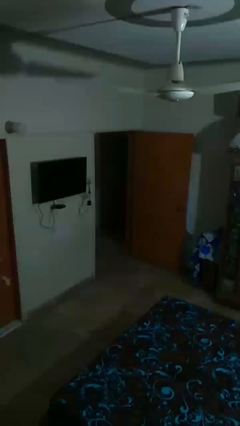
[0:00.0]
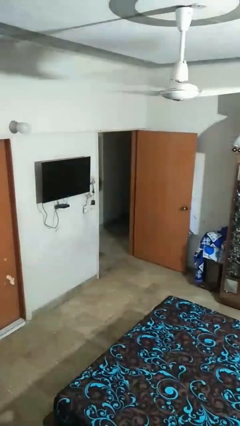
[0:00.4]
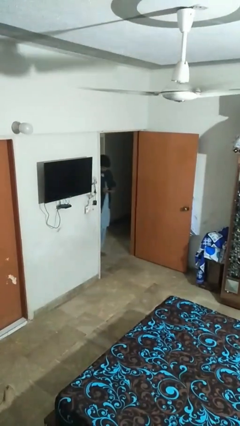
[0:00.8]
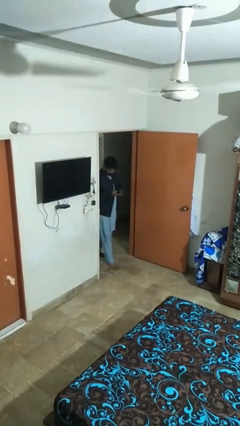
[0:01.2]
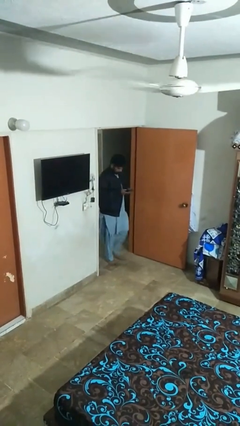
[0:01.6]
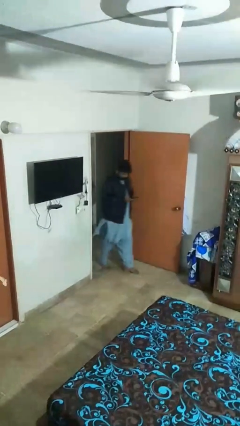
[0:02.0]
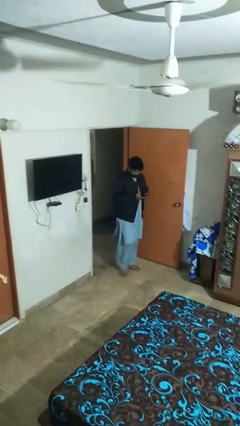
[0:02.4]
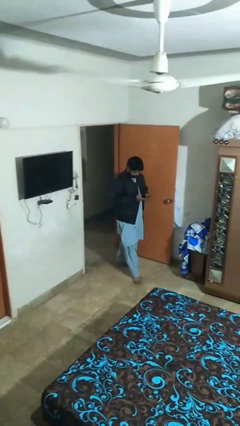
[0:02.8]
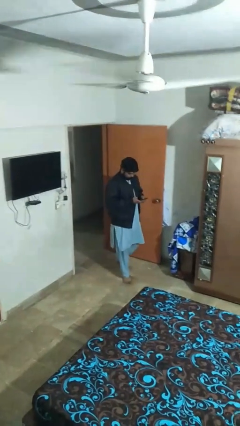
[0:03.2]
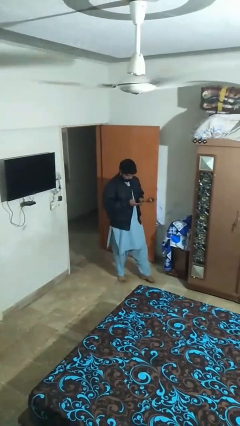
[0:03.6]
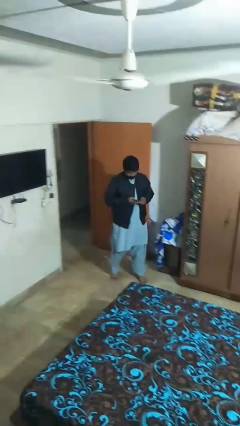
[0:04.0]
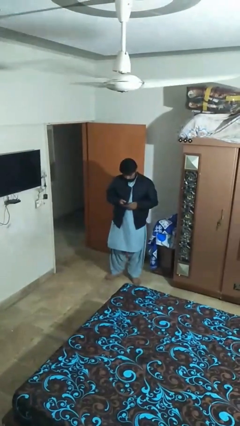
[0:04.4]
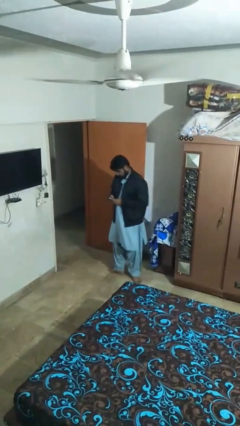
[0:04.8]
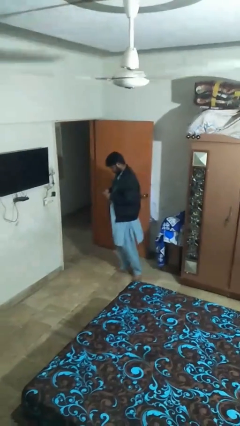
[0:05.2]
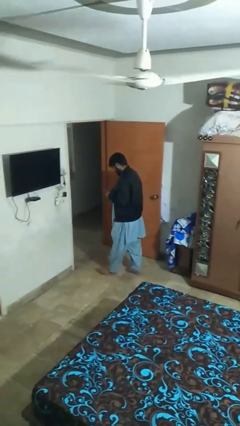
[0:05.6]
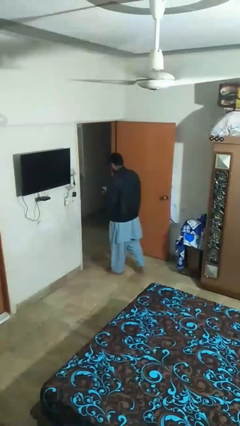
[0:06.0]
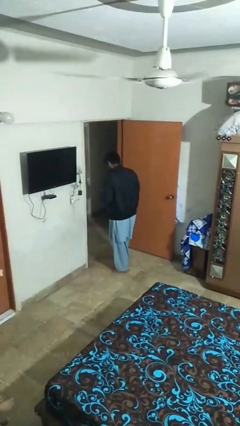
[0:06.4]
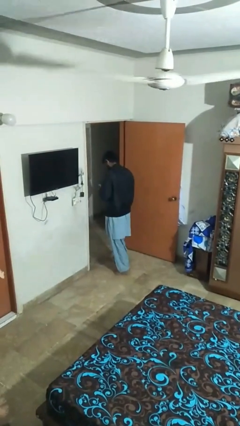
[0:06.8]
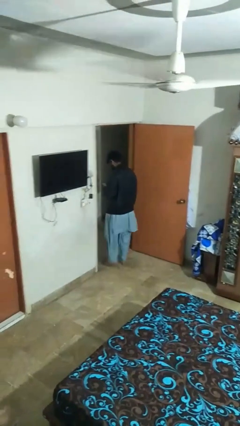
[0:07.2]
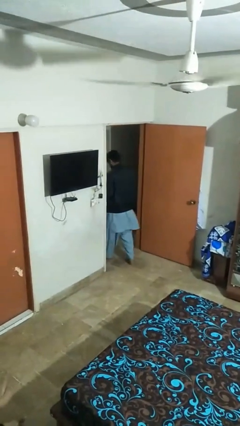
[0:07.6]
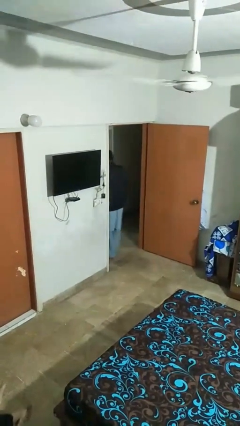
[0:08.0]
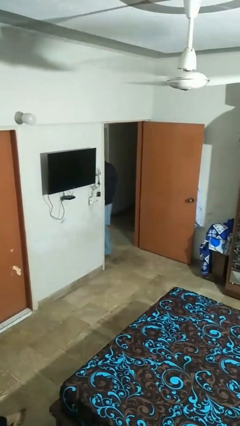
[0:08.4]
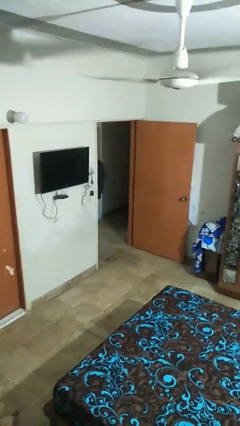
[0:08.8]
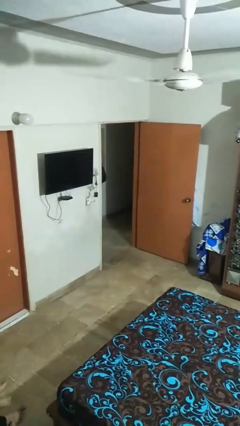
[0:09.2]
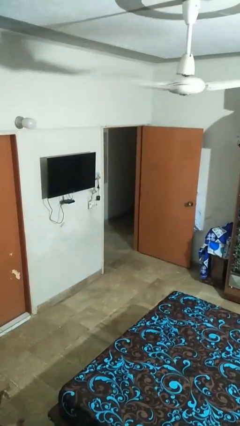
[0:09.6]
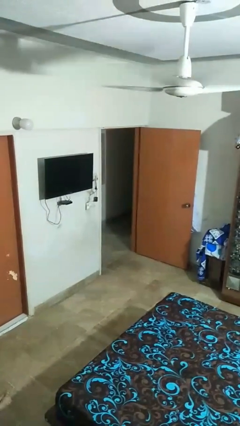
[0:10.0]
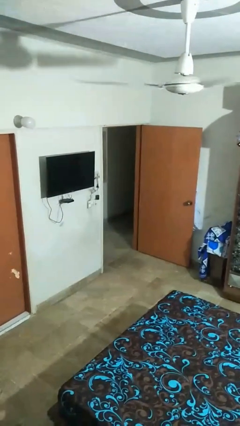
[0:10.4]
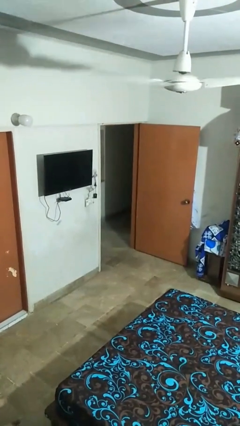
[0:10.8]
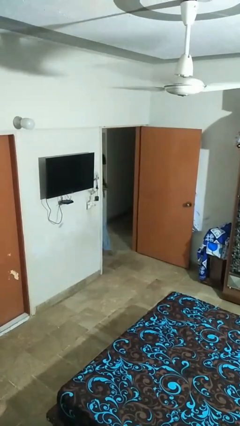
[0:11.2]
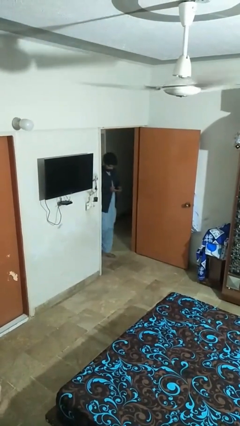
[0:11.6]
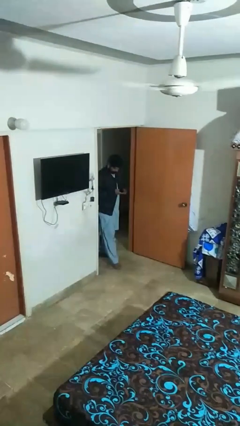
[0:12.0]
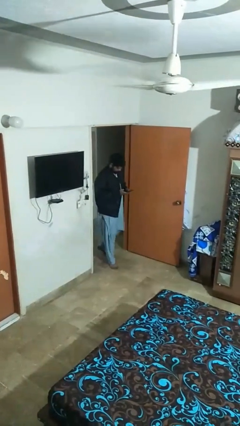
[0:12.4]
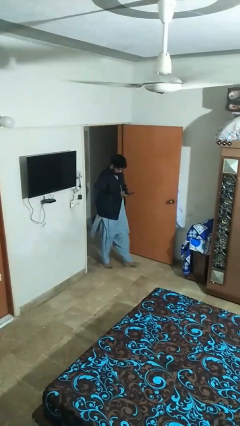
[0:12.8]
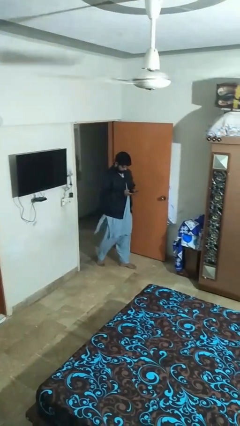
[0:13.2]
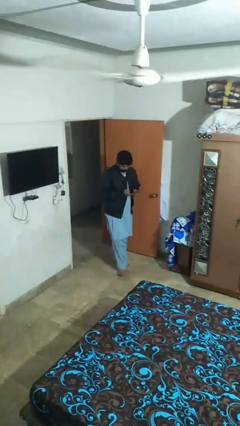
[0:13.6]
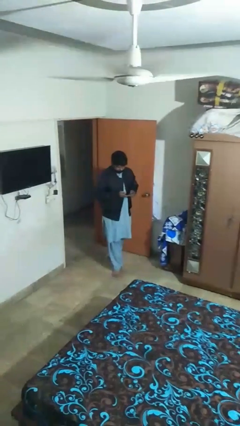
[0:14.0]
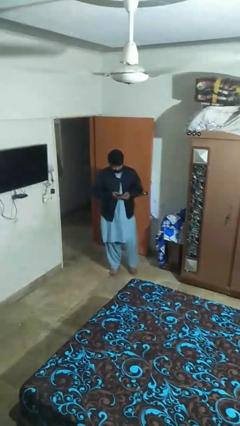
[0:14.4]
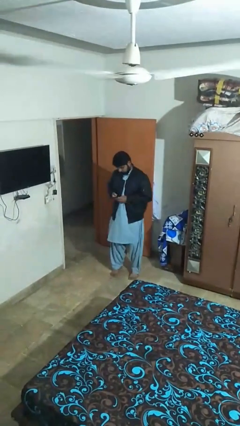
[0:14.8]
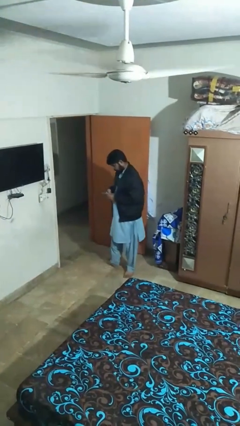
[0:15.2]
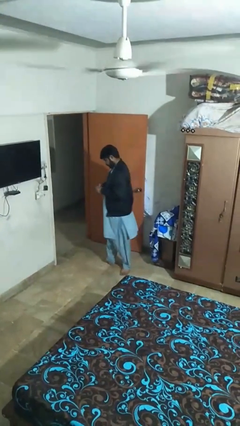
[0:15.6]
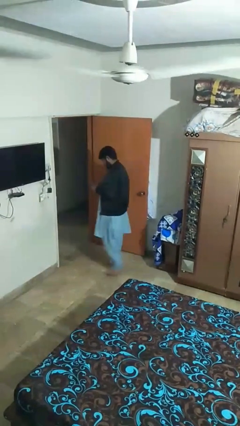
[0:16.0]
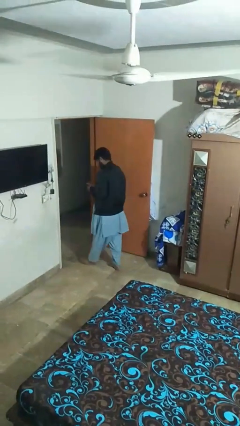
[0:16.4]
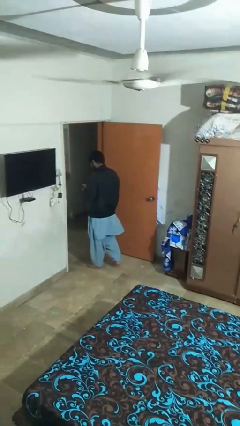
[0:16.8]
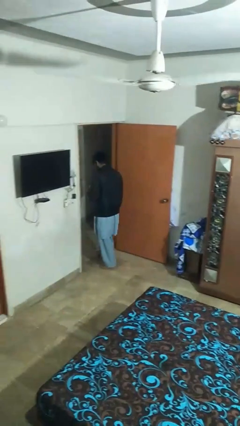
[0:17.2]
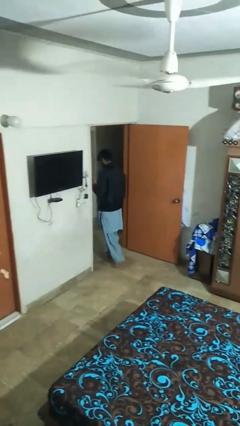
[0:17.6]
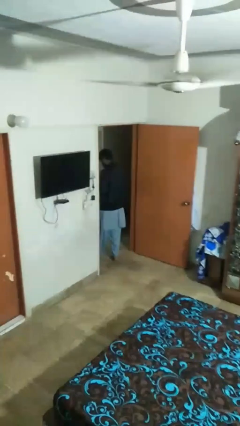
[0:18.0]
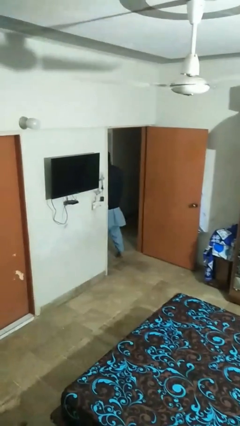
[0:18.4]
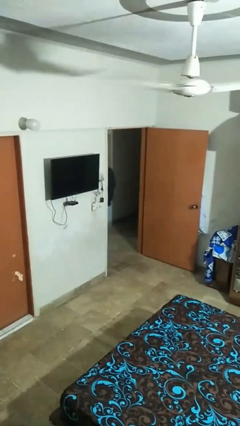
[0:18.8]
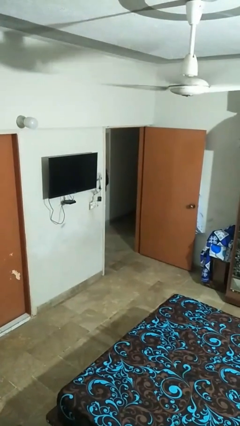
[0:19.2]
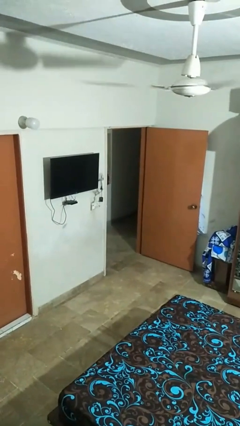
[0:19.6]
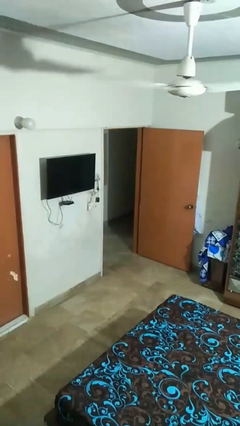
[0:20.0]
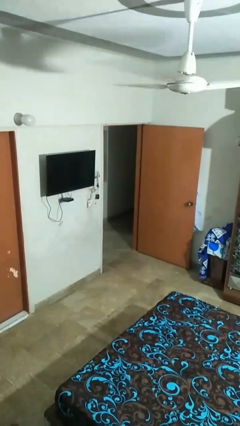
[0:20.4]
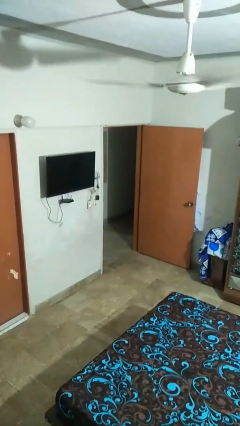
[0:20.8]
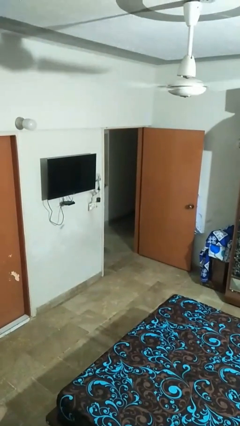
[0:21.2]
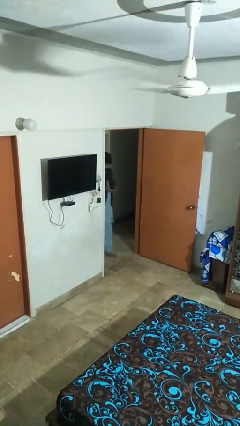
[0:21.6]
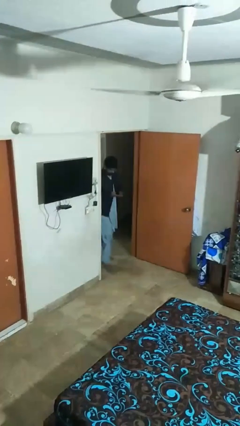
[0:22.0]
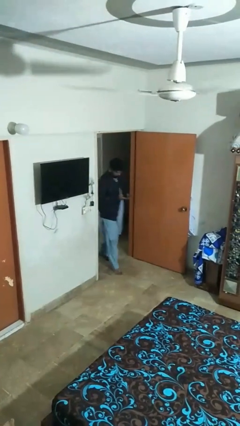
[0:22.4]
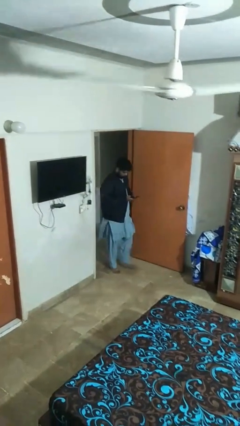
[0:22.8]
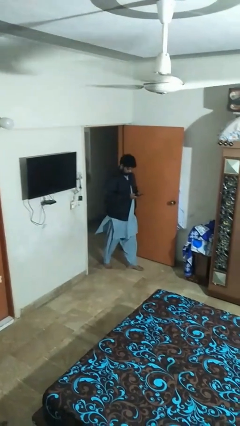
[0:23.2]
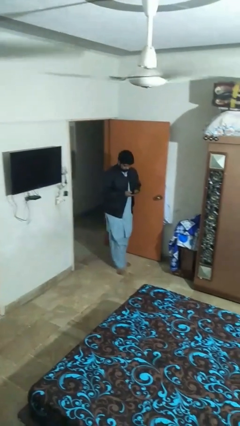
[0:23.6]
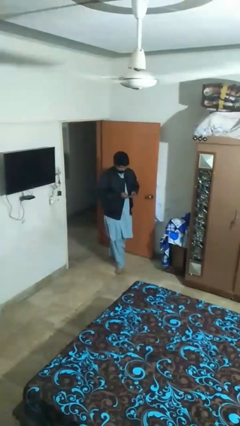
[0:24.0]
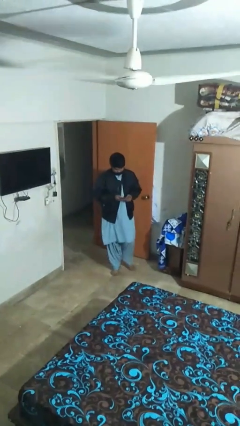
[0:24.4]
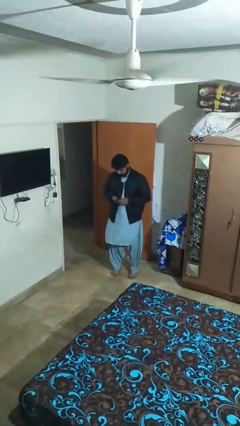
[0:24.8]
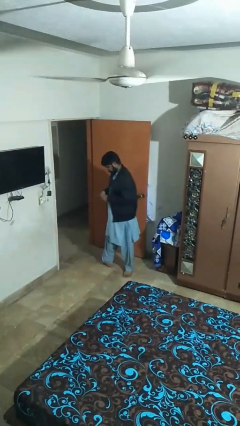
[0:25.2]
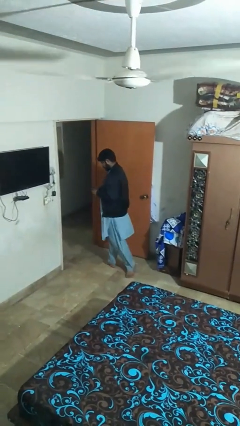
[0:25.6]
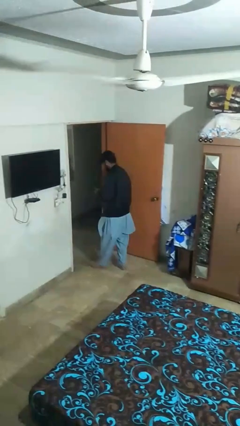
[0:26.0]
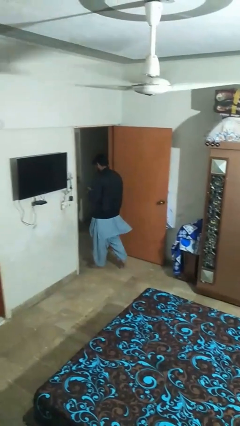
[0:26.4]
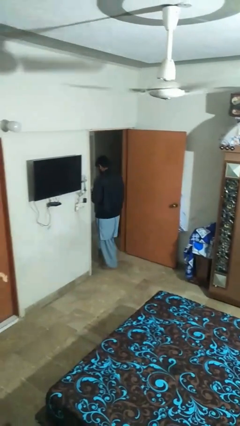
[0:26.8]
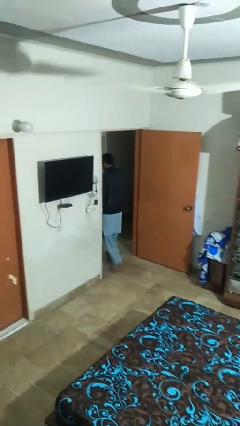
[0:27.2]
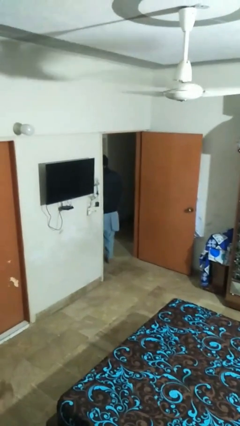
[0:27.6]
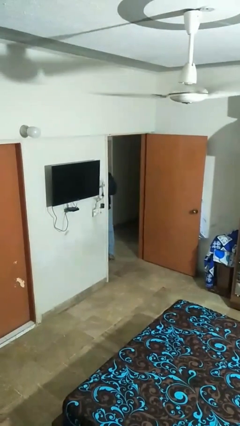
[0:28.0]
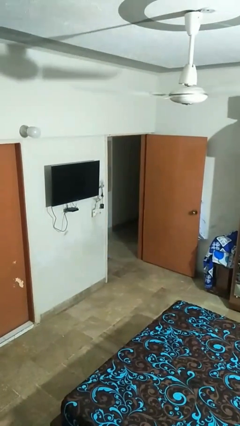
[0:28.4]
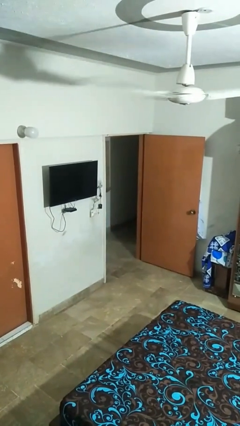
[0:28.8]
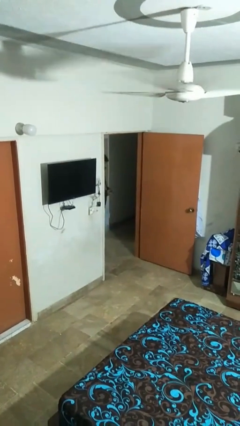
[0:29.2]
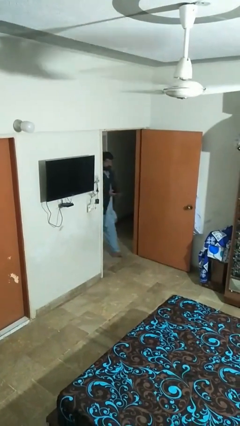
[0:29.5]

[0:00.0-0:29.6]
person texts on phone

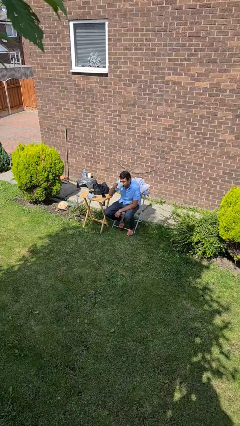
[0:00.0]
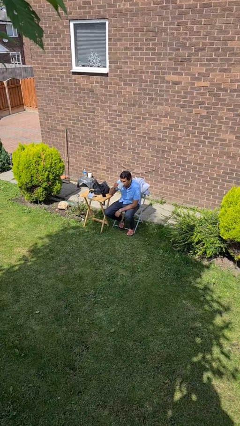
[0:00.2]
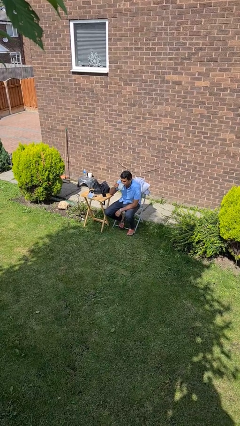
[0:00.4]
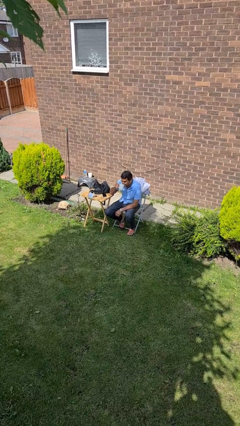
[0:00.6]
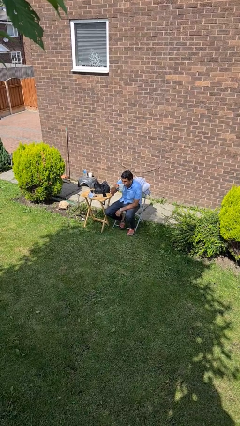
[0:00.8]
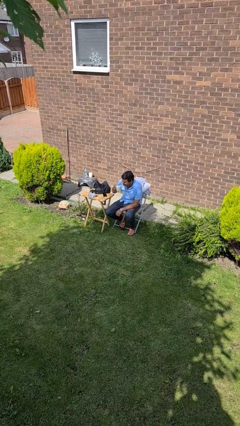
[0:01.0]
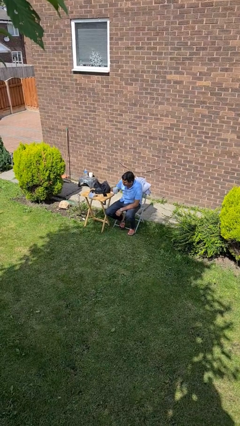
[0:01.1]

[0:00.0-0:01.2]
person puts down object on table

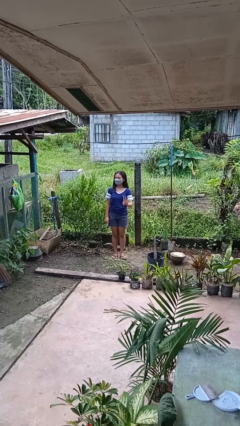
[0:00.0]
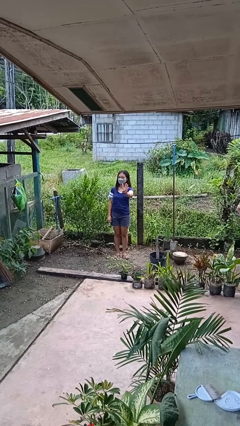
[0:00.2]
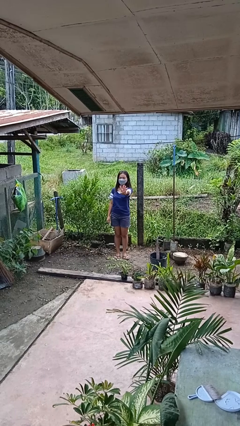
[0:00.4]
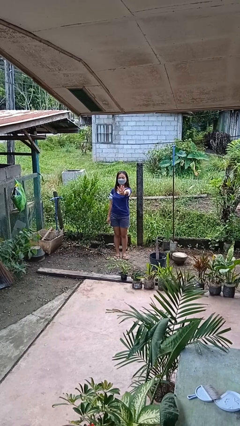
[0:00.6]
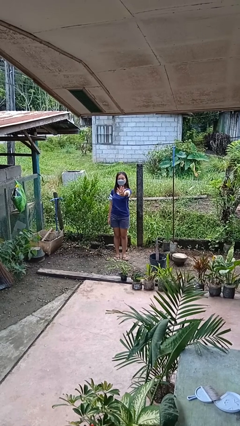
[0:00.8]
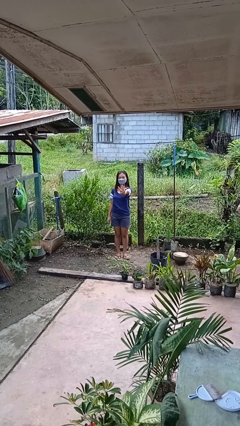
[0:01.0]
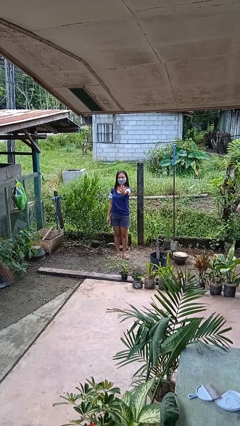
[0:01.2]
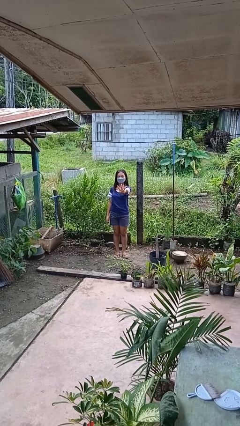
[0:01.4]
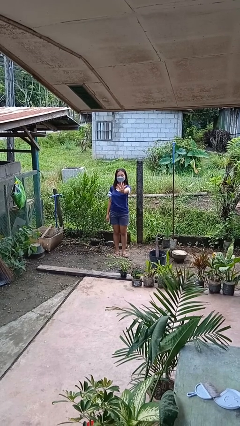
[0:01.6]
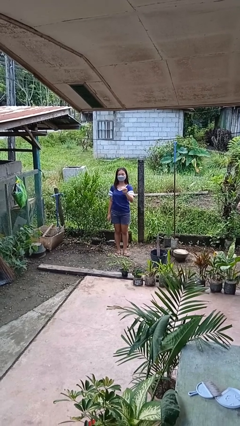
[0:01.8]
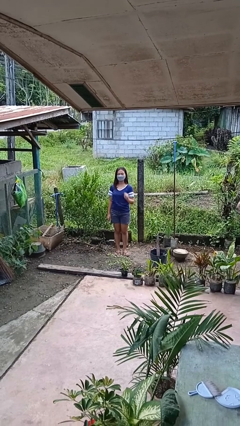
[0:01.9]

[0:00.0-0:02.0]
person gestures number four

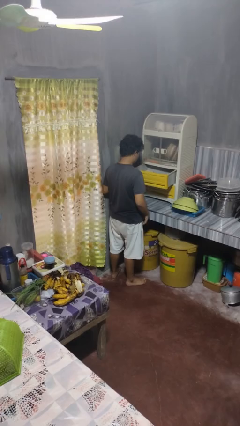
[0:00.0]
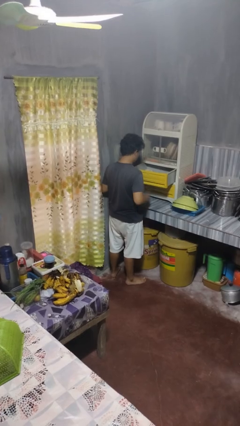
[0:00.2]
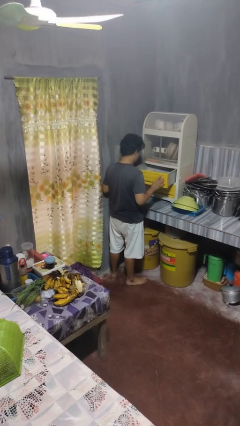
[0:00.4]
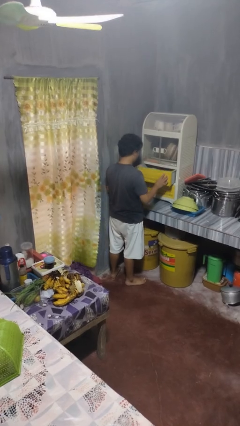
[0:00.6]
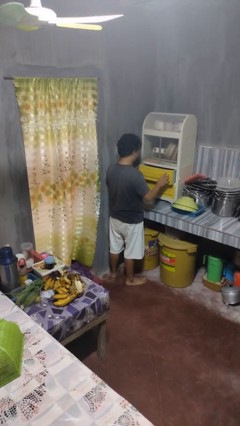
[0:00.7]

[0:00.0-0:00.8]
person closes kitchen drawer
